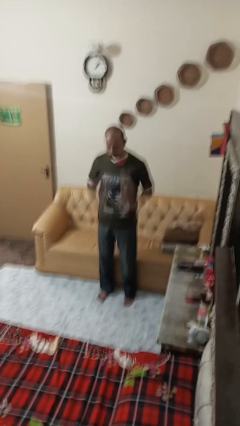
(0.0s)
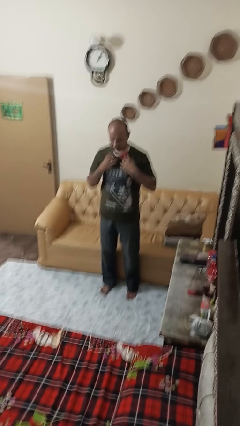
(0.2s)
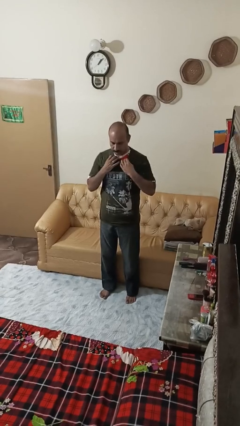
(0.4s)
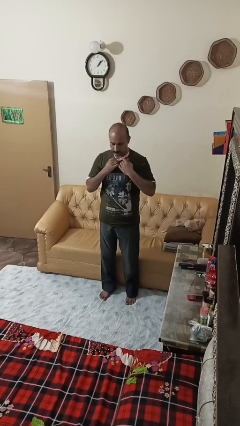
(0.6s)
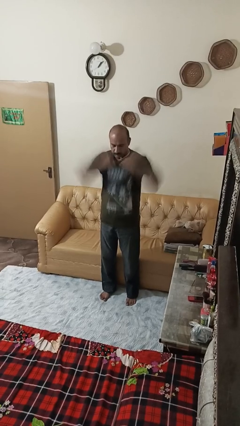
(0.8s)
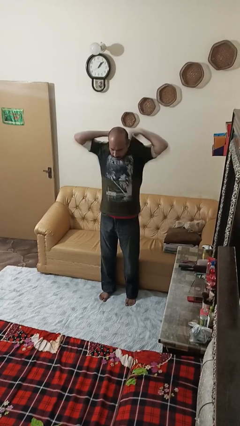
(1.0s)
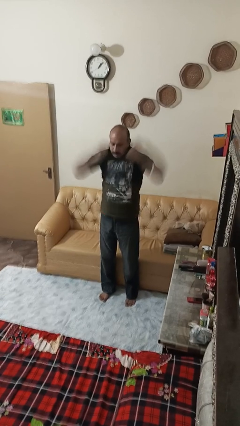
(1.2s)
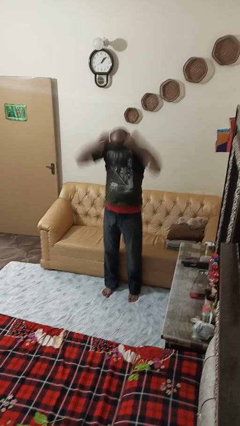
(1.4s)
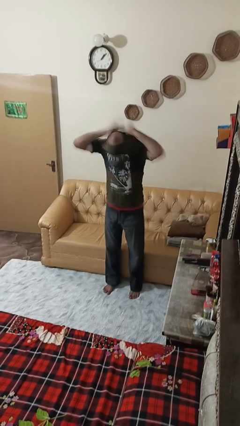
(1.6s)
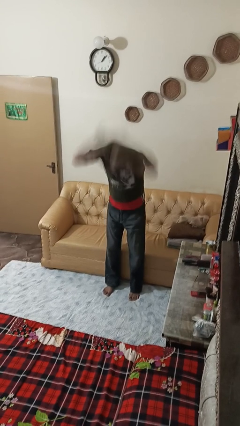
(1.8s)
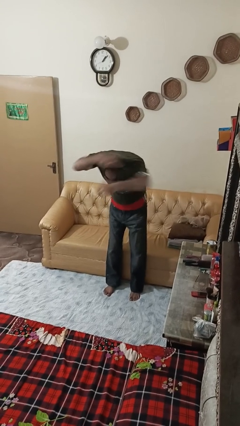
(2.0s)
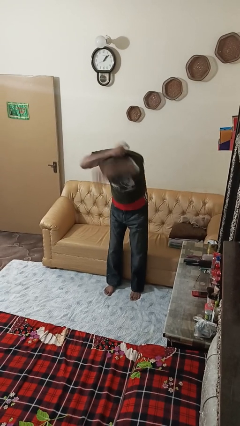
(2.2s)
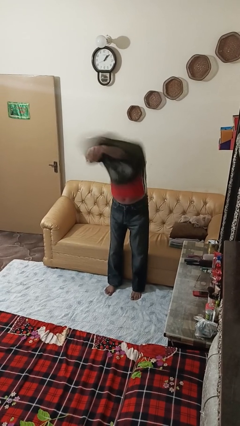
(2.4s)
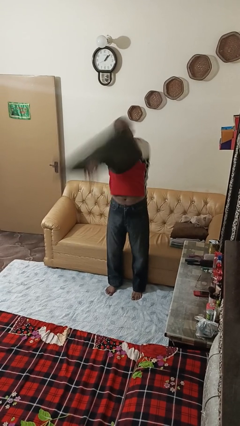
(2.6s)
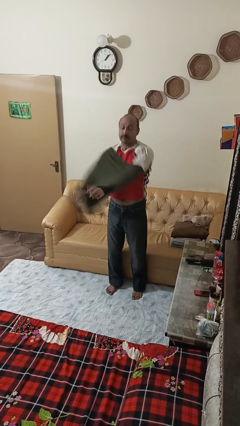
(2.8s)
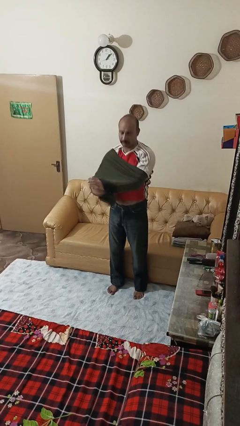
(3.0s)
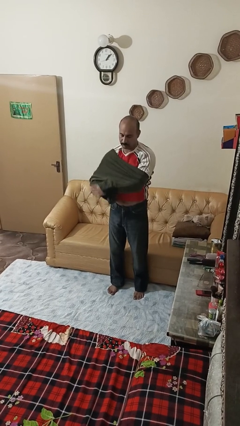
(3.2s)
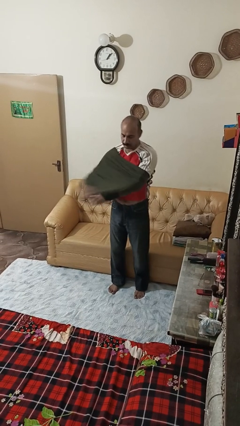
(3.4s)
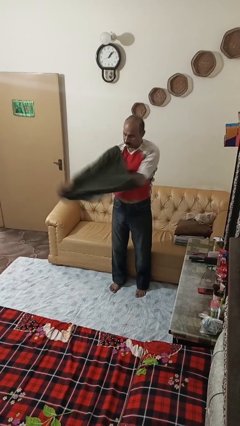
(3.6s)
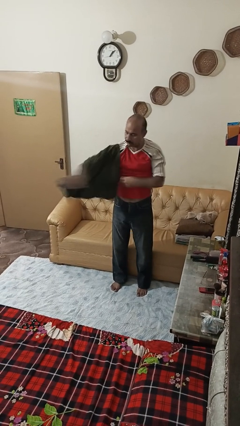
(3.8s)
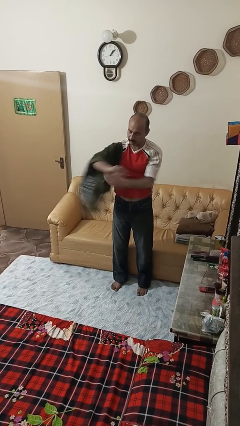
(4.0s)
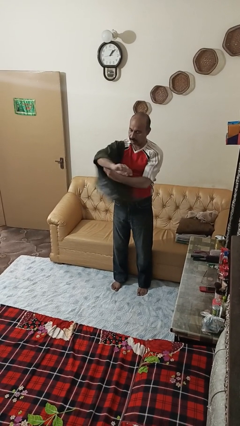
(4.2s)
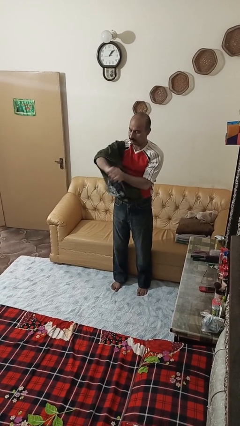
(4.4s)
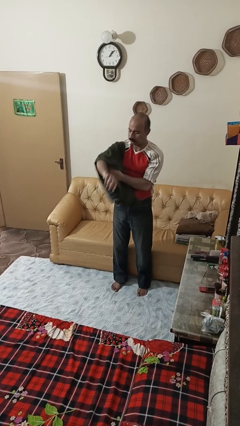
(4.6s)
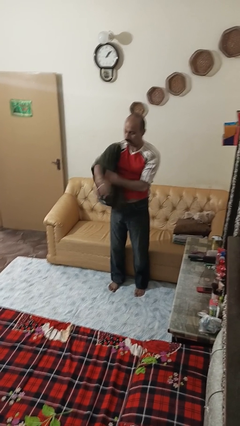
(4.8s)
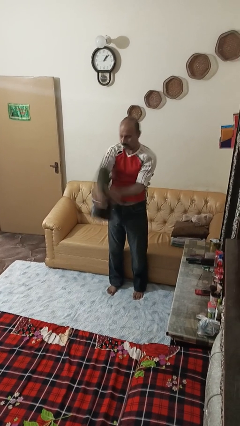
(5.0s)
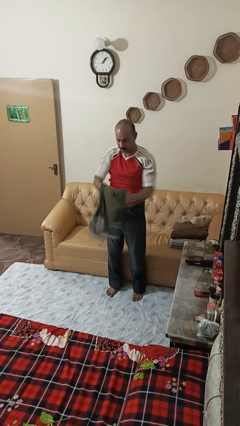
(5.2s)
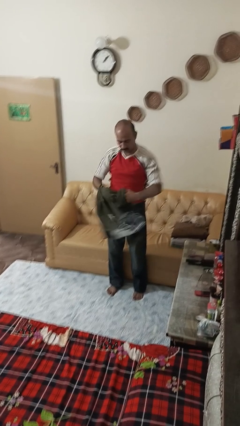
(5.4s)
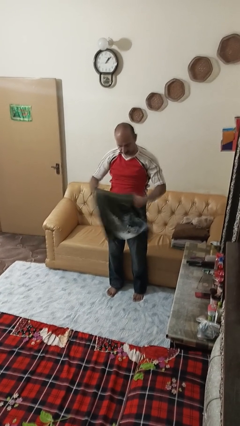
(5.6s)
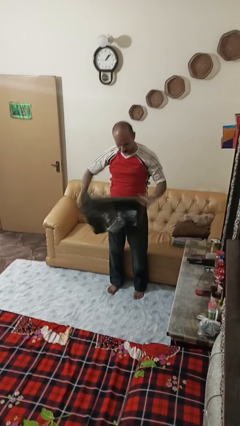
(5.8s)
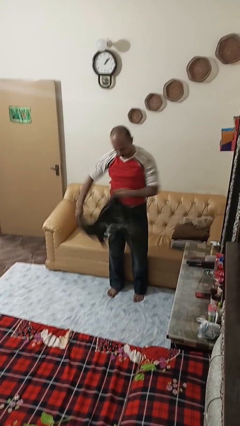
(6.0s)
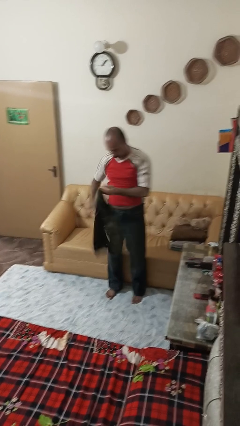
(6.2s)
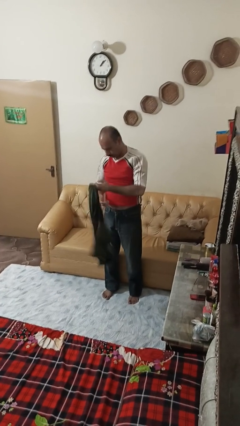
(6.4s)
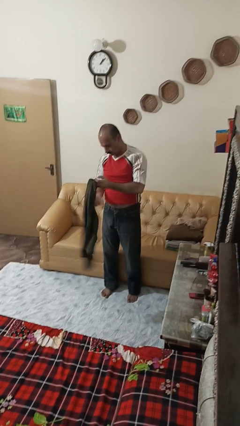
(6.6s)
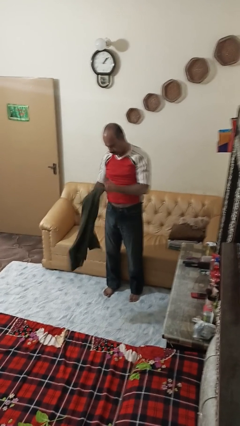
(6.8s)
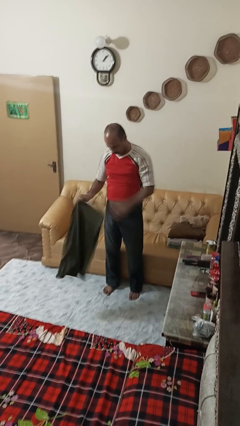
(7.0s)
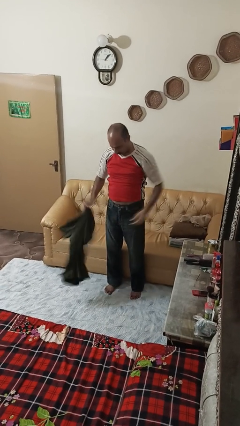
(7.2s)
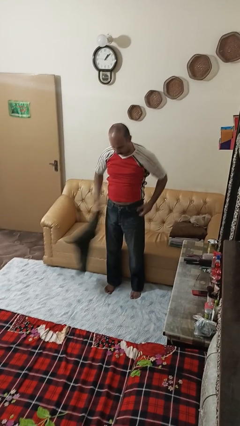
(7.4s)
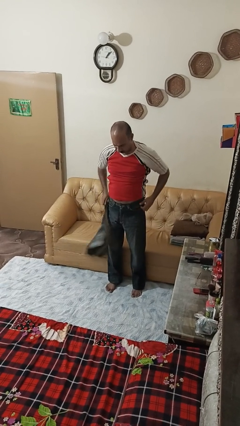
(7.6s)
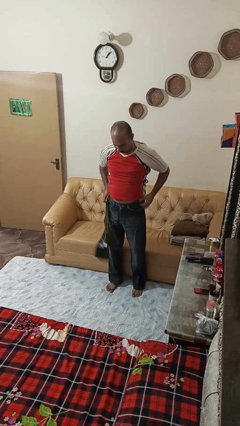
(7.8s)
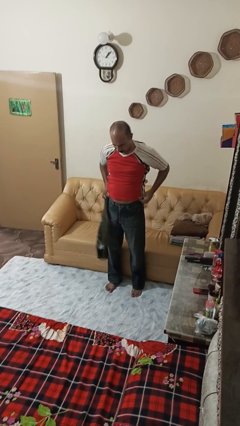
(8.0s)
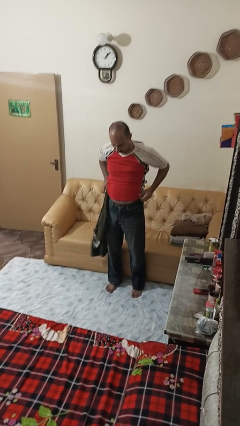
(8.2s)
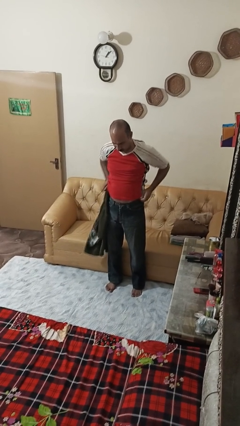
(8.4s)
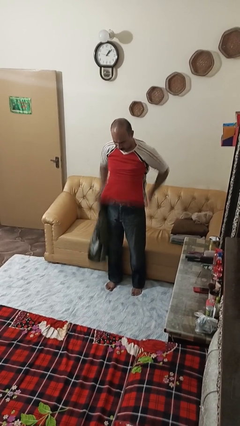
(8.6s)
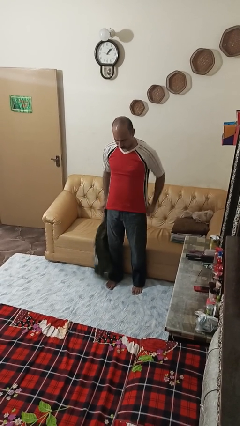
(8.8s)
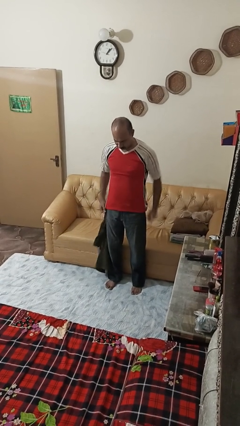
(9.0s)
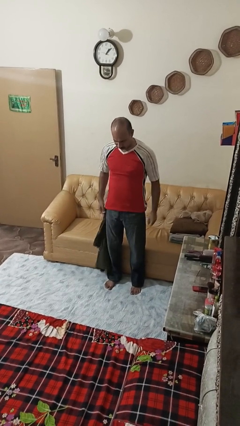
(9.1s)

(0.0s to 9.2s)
person takes off shirt

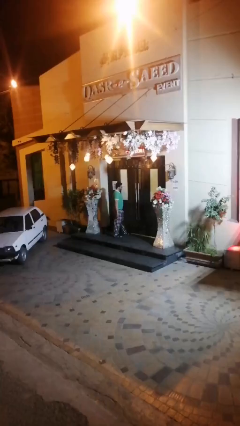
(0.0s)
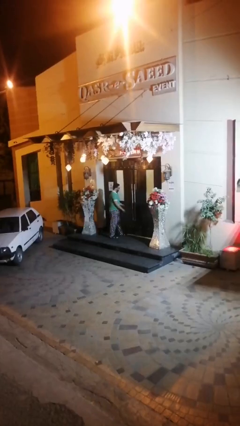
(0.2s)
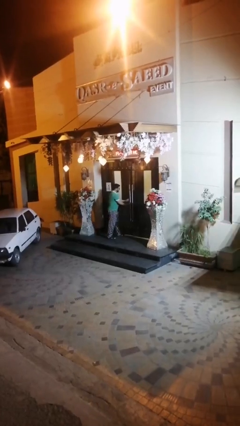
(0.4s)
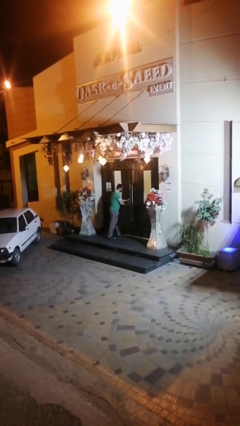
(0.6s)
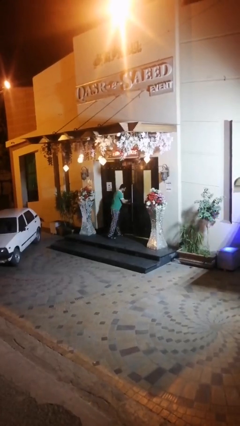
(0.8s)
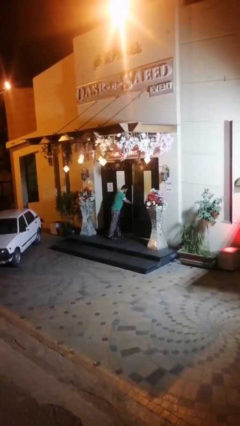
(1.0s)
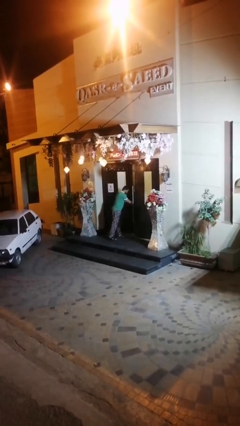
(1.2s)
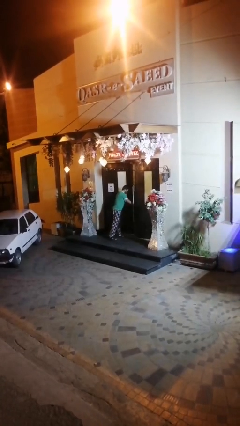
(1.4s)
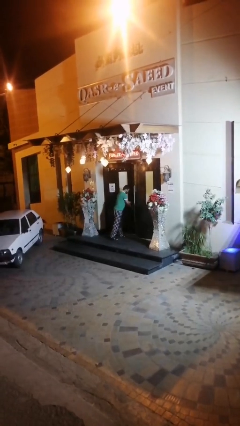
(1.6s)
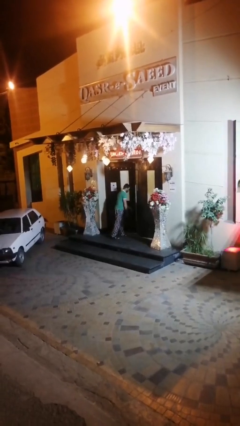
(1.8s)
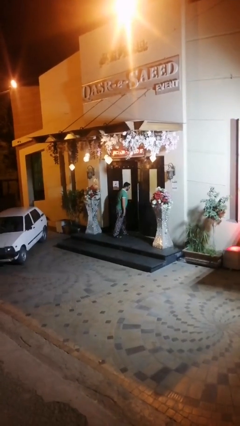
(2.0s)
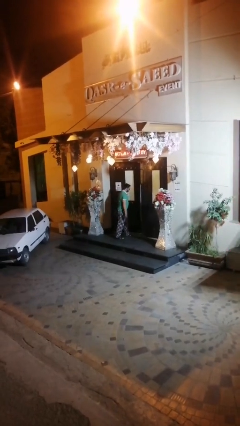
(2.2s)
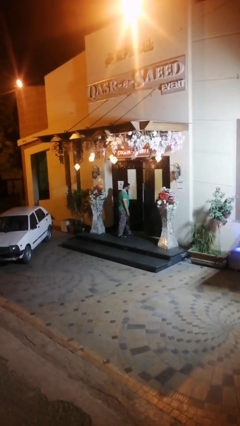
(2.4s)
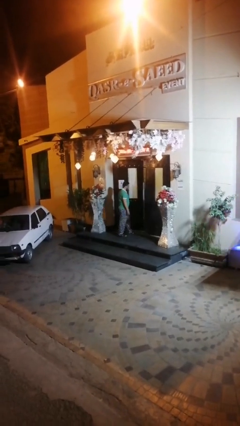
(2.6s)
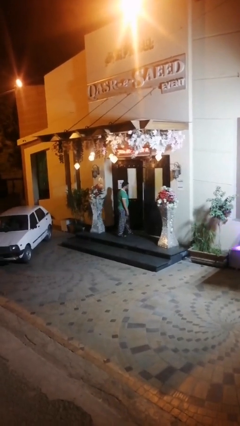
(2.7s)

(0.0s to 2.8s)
person opens facility door

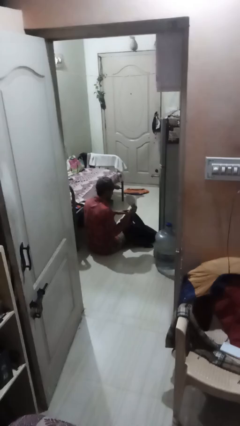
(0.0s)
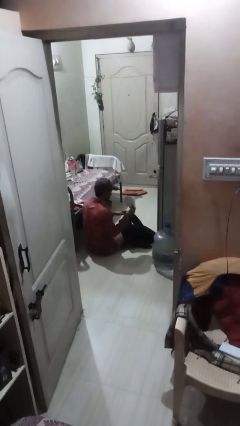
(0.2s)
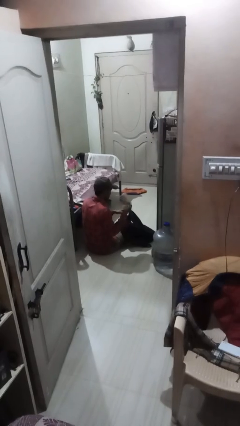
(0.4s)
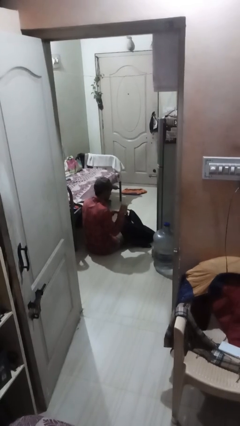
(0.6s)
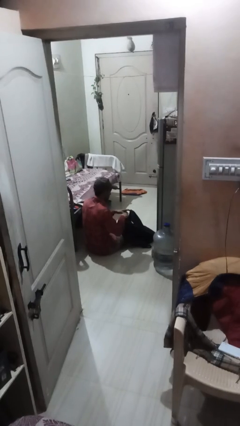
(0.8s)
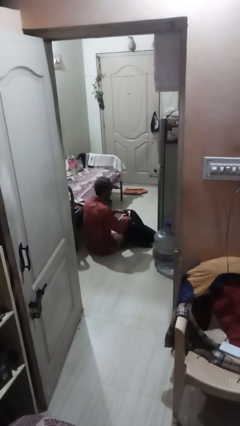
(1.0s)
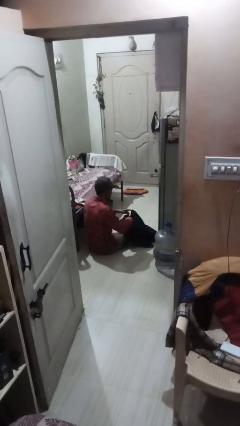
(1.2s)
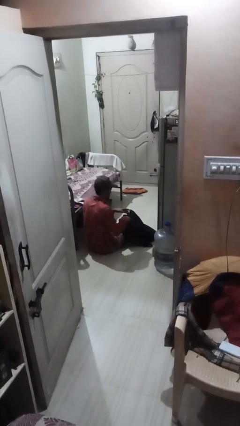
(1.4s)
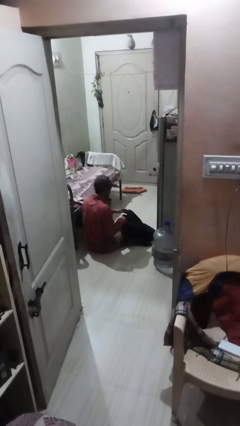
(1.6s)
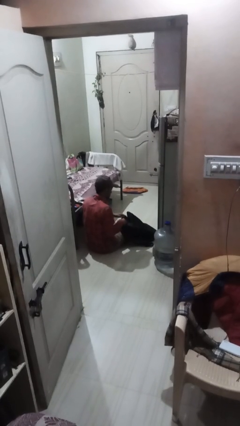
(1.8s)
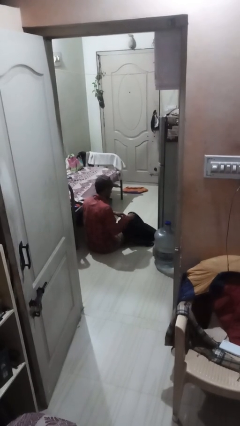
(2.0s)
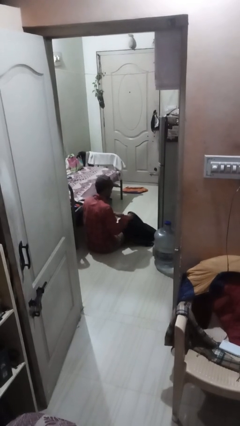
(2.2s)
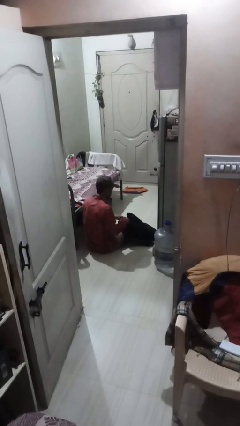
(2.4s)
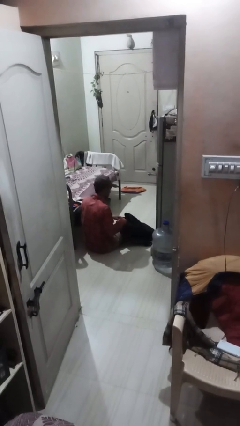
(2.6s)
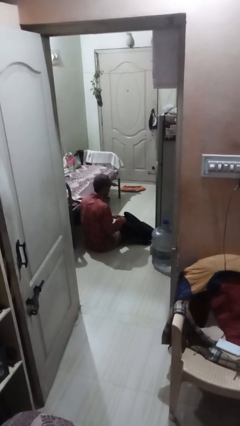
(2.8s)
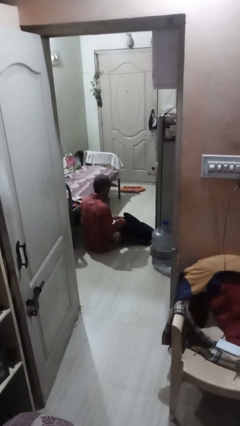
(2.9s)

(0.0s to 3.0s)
person puts object into backpack

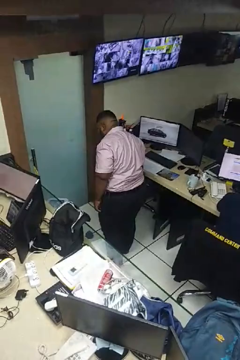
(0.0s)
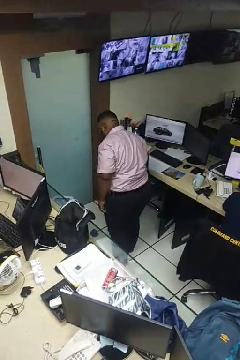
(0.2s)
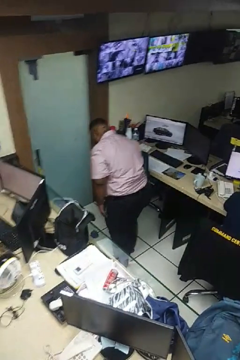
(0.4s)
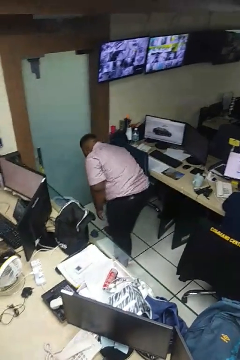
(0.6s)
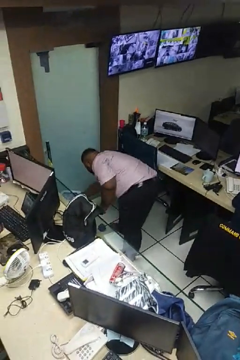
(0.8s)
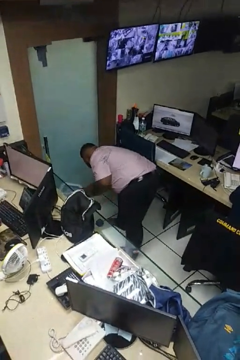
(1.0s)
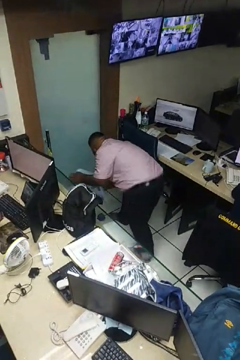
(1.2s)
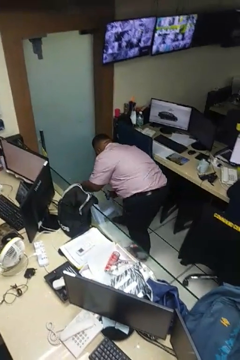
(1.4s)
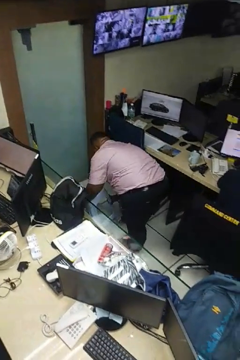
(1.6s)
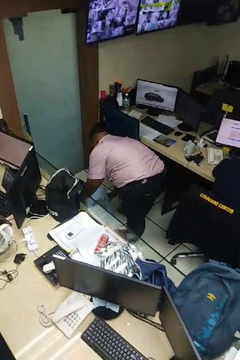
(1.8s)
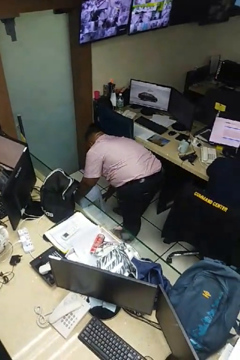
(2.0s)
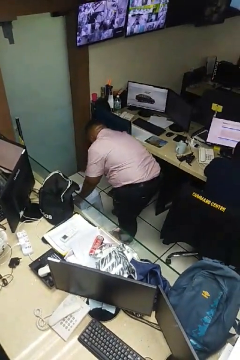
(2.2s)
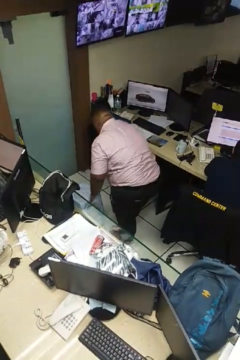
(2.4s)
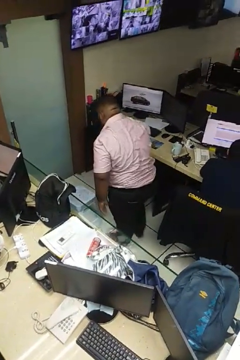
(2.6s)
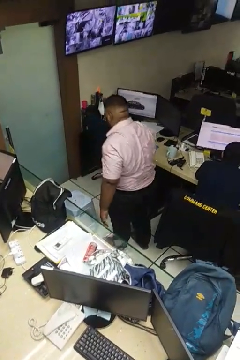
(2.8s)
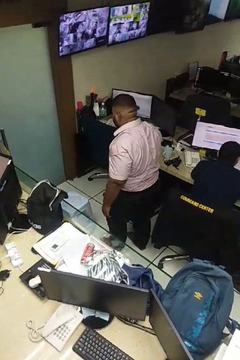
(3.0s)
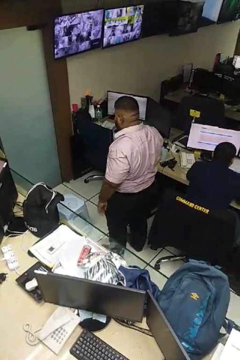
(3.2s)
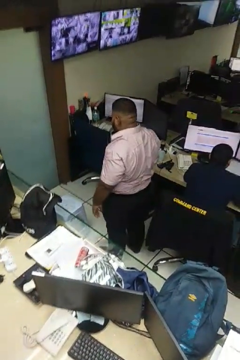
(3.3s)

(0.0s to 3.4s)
person sets upright furniture
